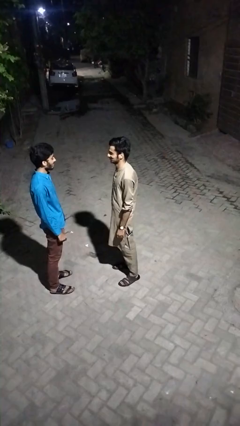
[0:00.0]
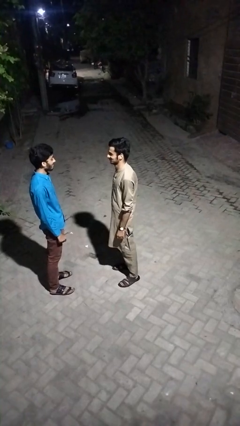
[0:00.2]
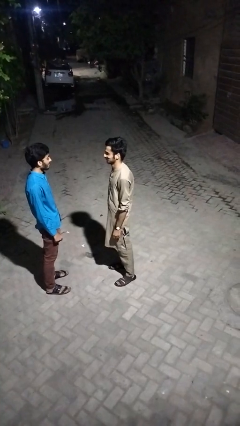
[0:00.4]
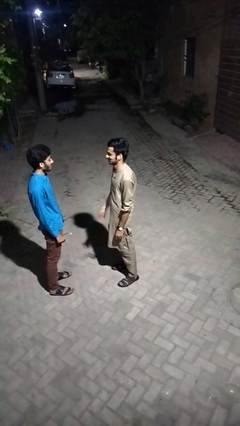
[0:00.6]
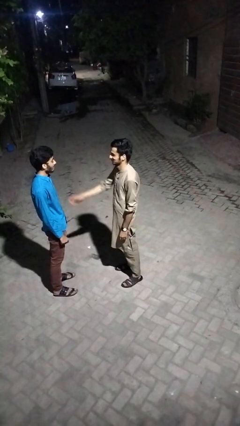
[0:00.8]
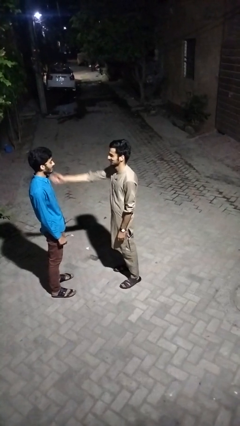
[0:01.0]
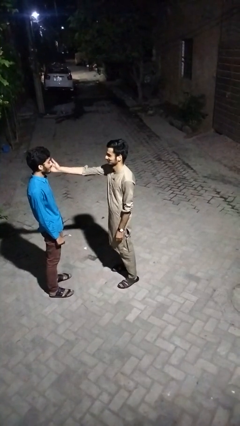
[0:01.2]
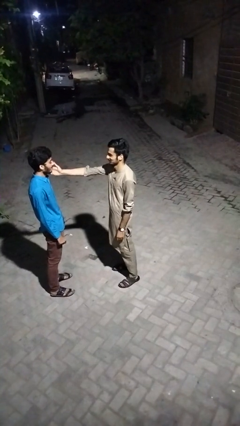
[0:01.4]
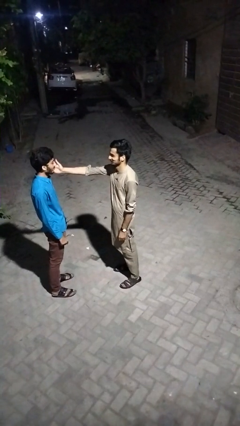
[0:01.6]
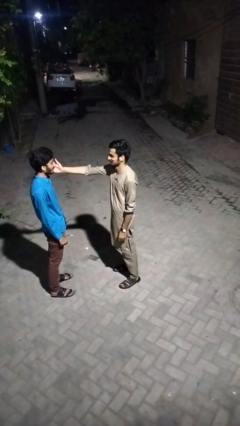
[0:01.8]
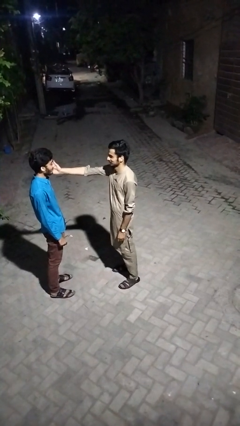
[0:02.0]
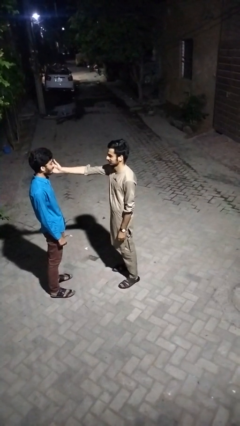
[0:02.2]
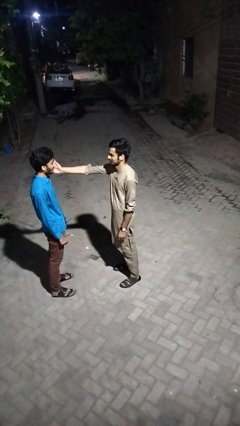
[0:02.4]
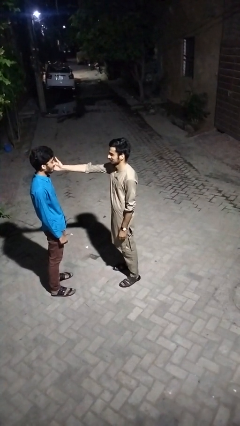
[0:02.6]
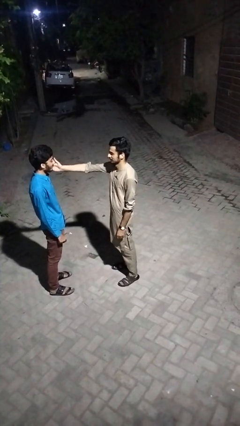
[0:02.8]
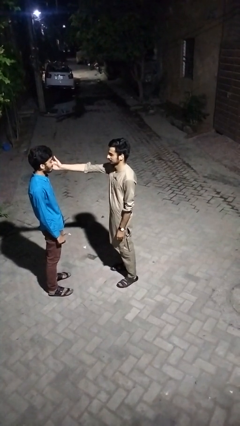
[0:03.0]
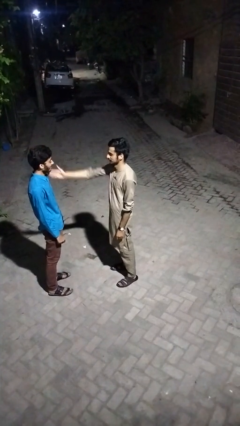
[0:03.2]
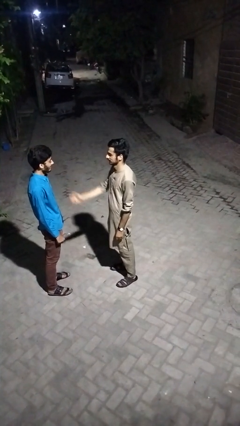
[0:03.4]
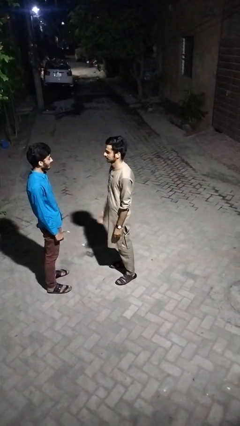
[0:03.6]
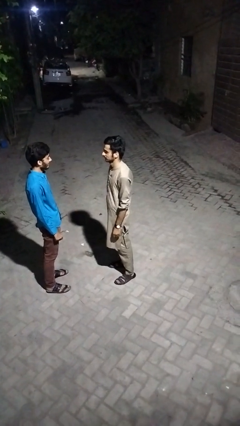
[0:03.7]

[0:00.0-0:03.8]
person touches face of person

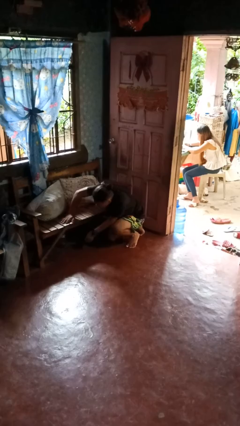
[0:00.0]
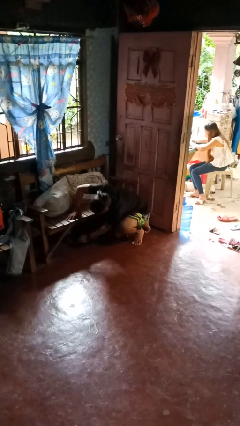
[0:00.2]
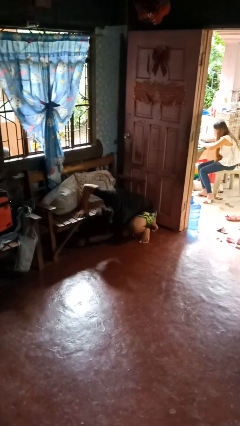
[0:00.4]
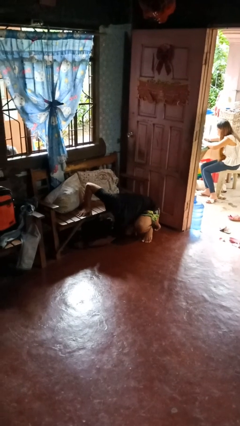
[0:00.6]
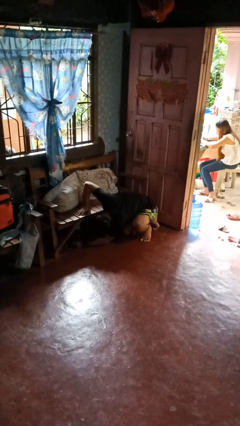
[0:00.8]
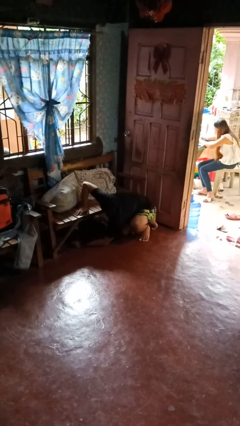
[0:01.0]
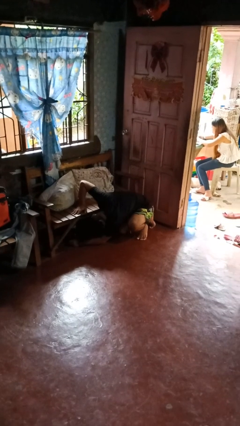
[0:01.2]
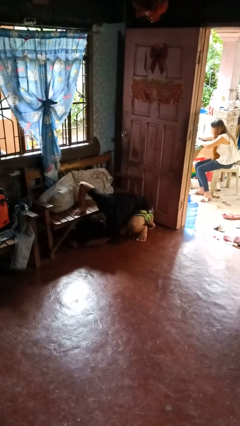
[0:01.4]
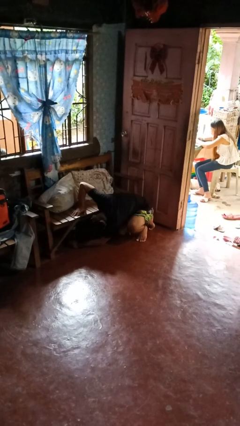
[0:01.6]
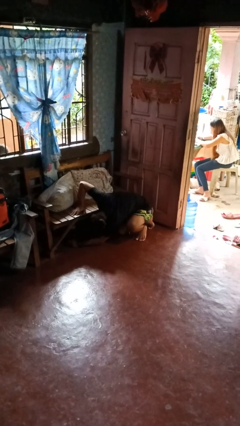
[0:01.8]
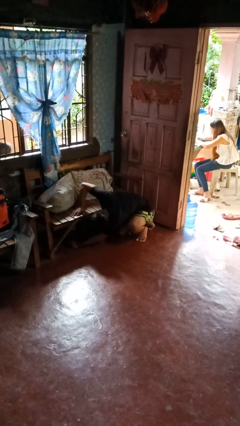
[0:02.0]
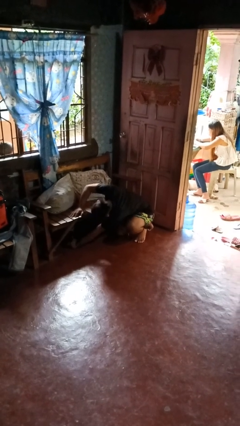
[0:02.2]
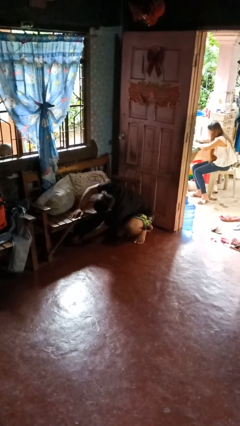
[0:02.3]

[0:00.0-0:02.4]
person searches under couch

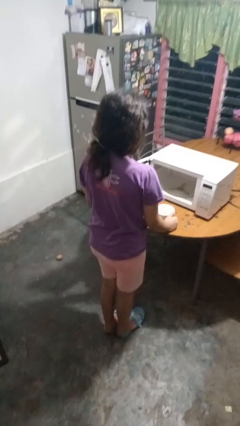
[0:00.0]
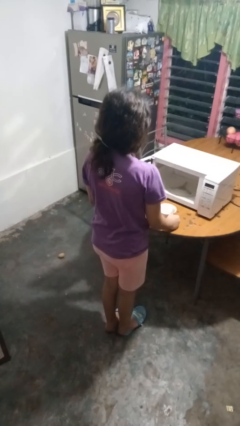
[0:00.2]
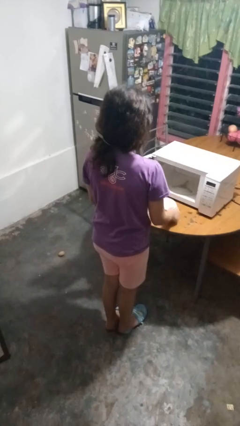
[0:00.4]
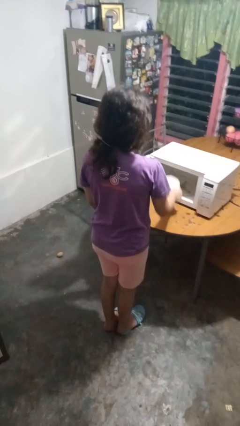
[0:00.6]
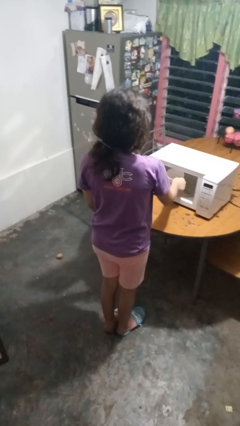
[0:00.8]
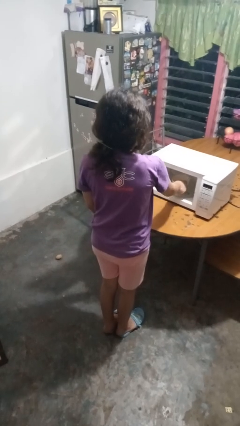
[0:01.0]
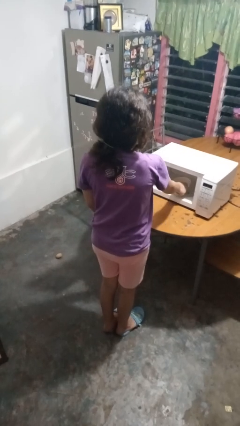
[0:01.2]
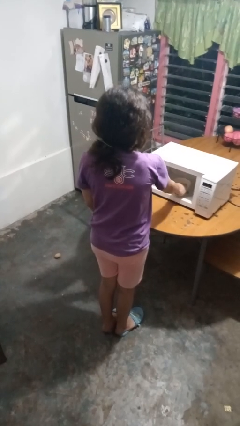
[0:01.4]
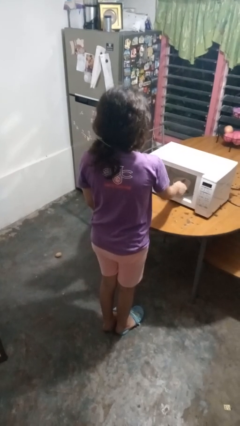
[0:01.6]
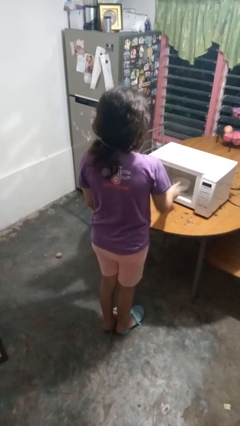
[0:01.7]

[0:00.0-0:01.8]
person puts object into microwave

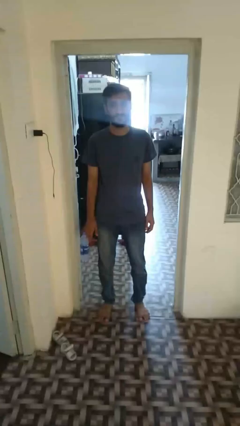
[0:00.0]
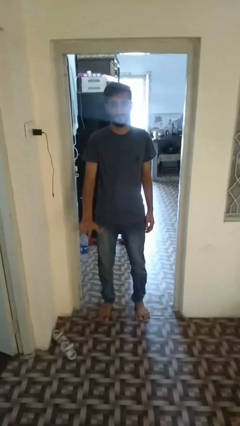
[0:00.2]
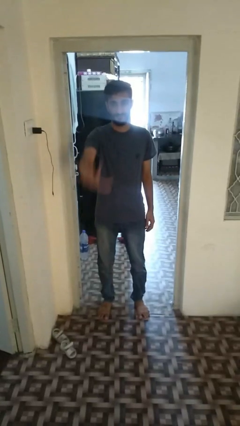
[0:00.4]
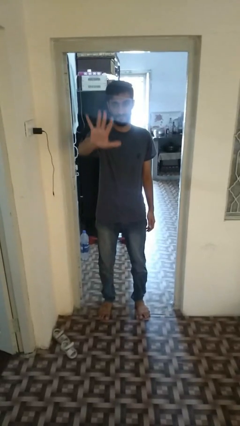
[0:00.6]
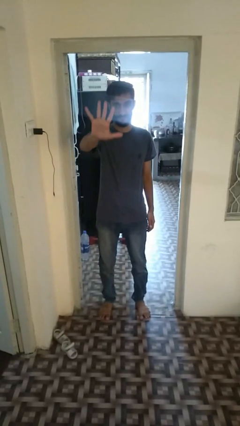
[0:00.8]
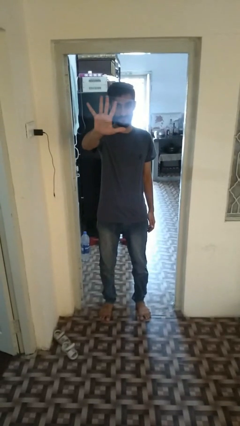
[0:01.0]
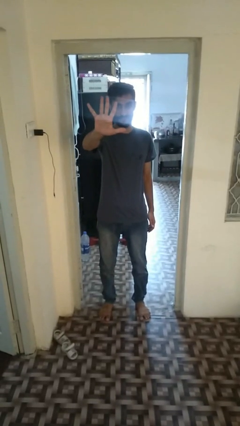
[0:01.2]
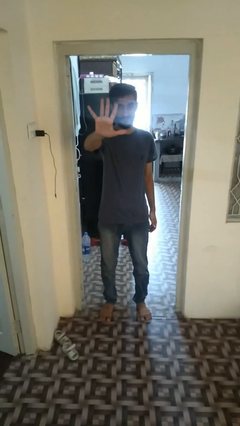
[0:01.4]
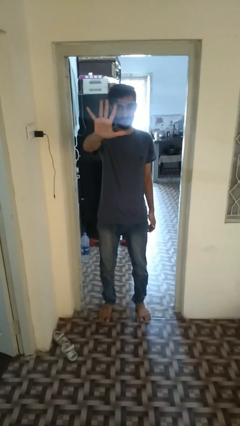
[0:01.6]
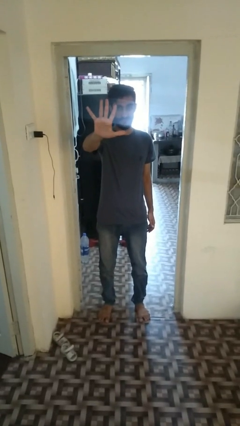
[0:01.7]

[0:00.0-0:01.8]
person gestures number five

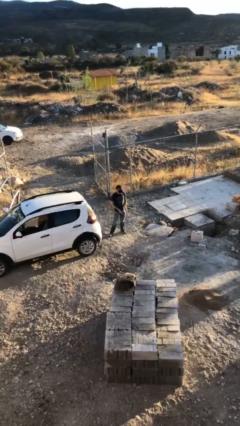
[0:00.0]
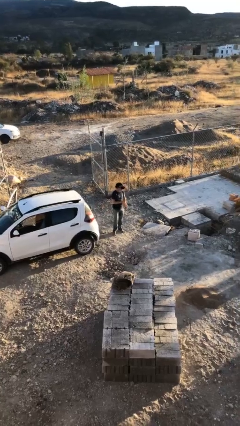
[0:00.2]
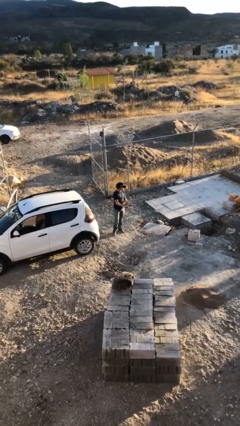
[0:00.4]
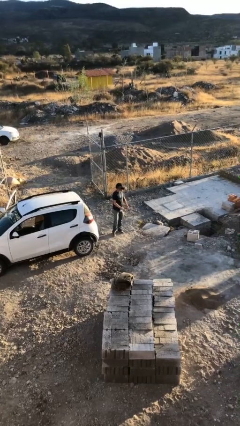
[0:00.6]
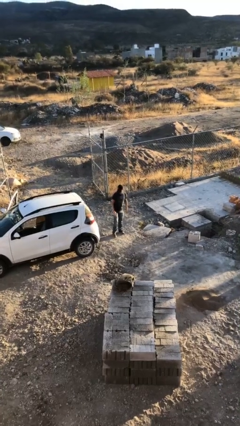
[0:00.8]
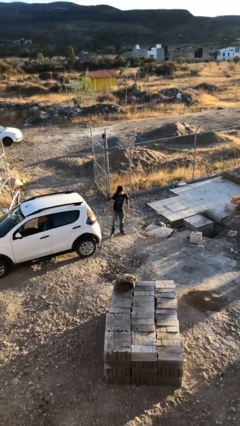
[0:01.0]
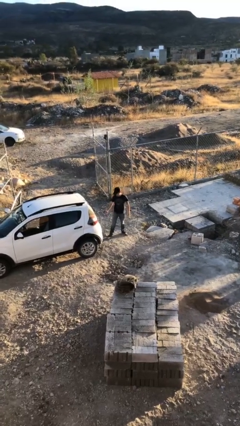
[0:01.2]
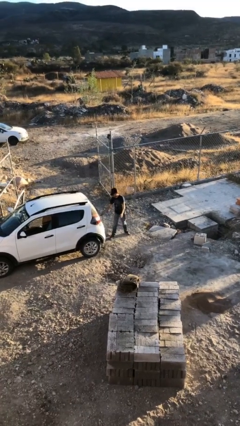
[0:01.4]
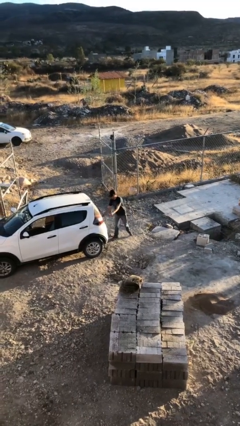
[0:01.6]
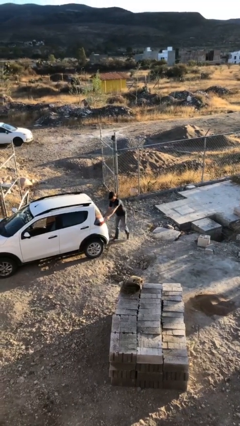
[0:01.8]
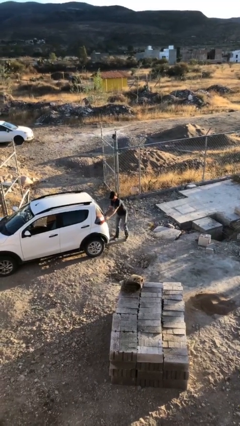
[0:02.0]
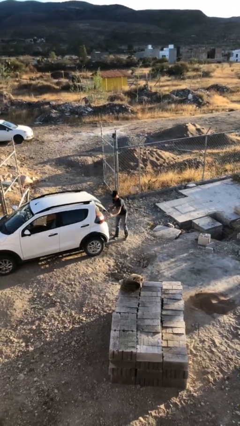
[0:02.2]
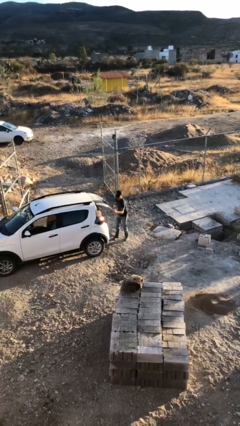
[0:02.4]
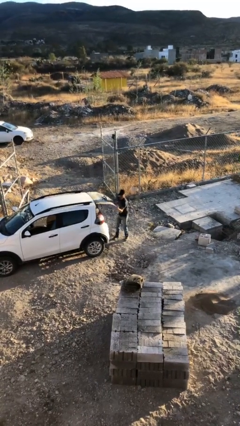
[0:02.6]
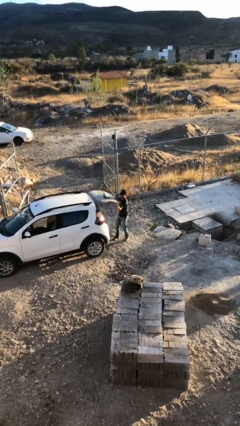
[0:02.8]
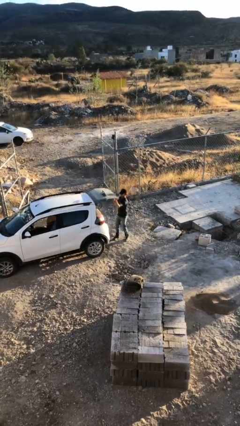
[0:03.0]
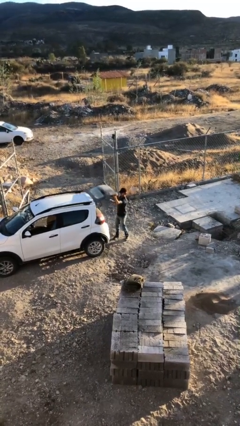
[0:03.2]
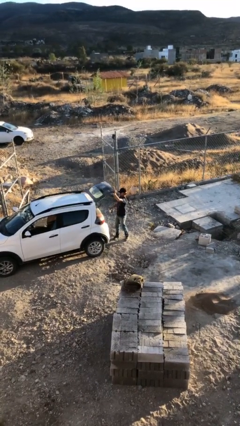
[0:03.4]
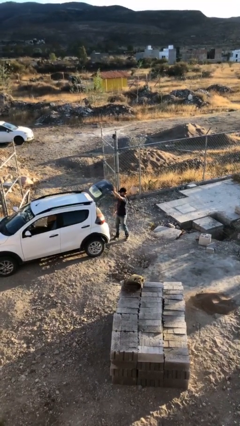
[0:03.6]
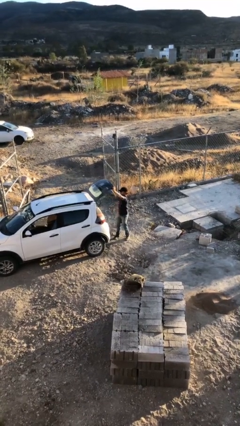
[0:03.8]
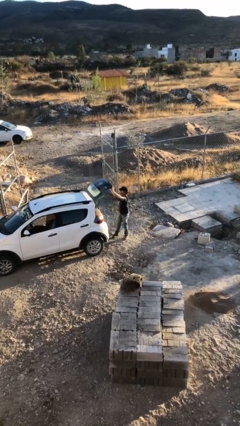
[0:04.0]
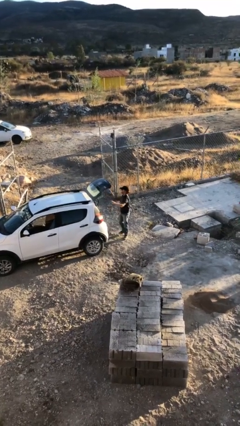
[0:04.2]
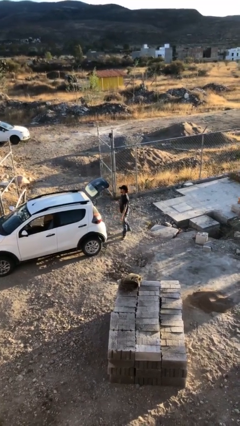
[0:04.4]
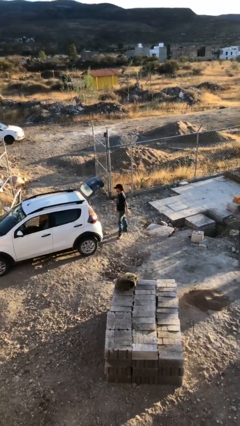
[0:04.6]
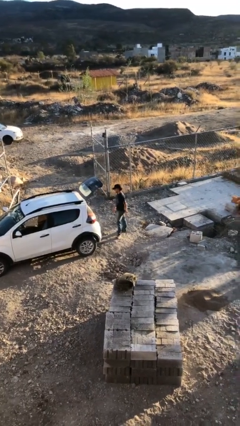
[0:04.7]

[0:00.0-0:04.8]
person opens car trunk

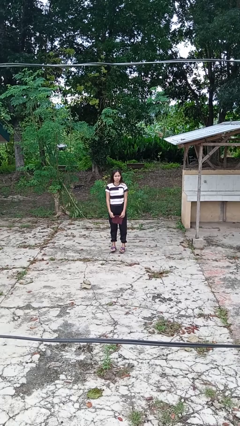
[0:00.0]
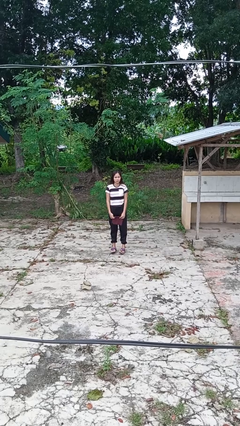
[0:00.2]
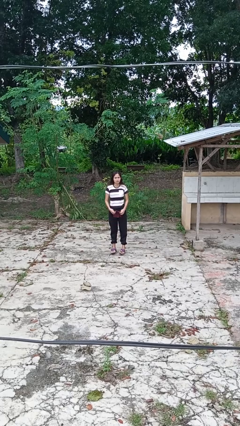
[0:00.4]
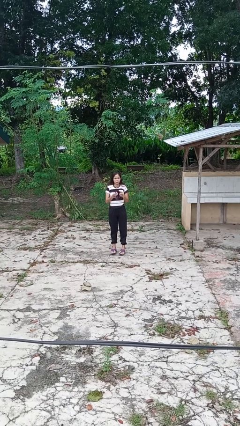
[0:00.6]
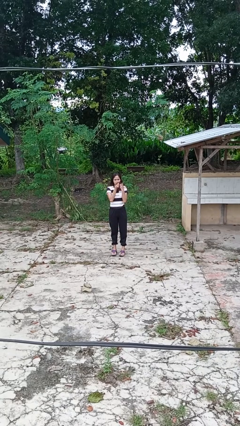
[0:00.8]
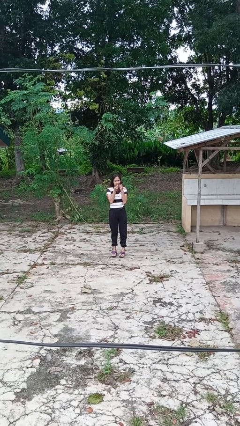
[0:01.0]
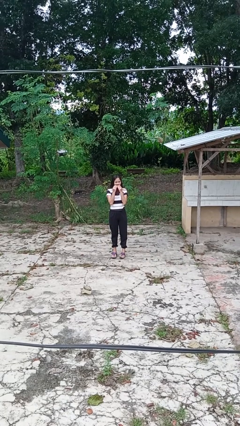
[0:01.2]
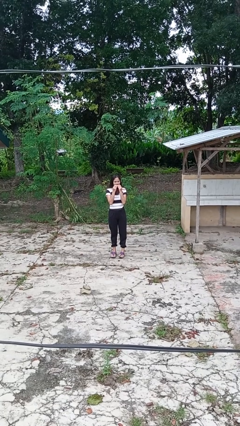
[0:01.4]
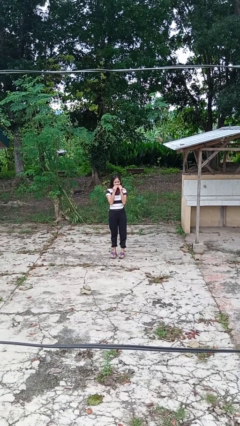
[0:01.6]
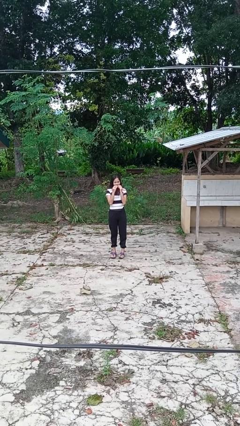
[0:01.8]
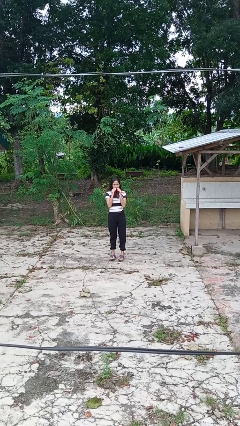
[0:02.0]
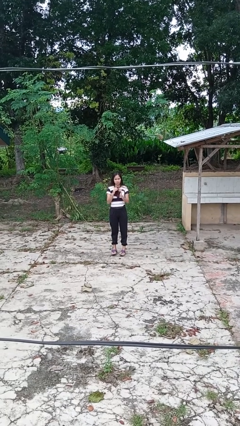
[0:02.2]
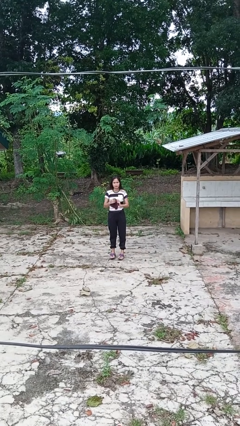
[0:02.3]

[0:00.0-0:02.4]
person wipes mouth with napkin

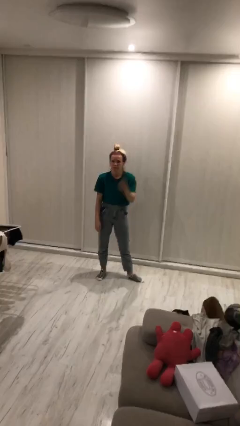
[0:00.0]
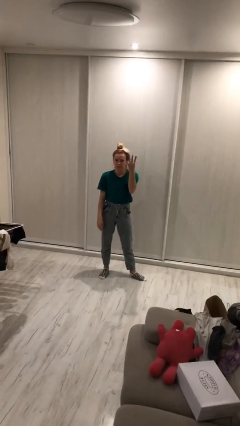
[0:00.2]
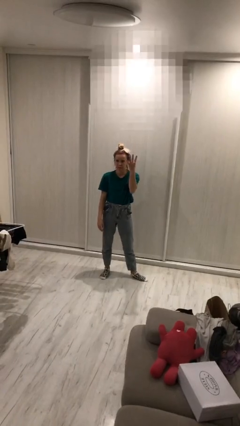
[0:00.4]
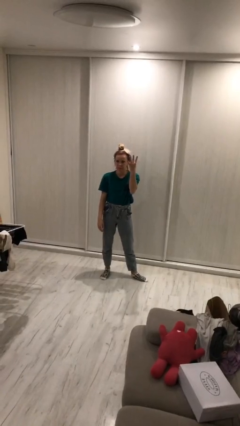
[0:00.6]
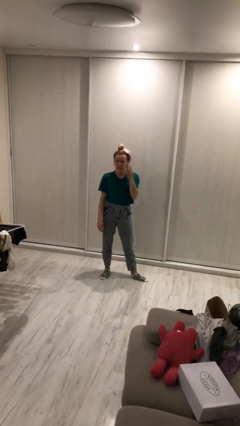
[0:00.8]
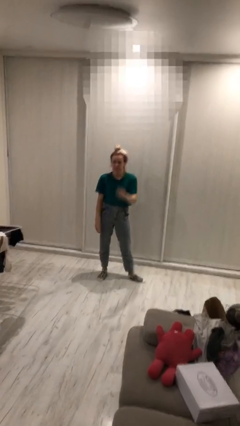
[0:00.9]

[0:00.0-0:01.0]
person gestures number four
